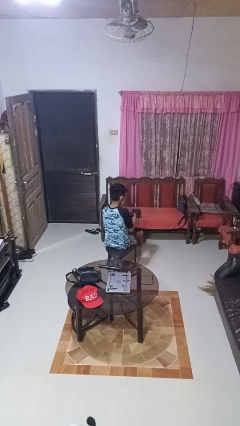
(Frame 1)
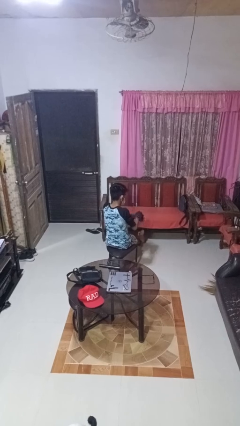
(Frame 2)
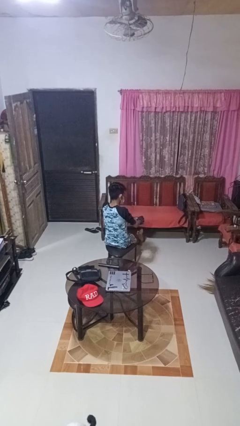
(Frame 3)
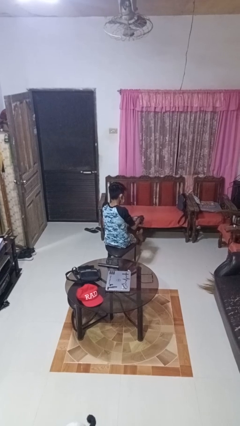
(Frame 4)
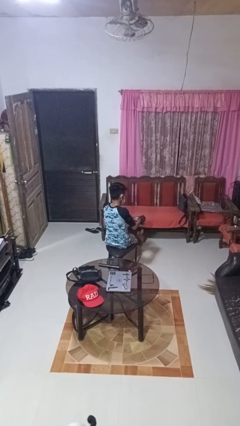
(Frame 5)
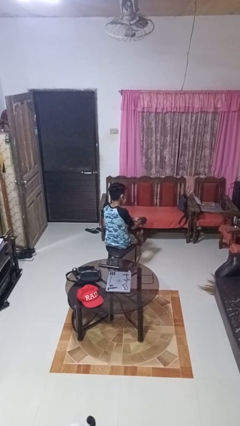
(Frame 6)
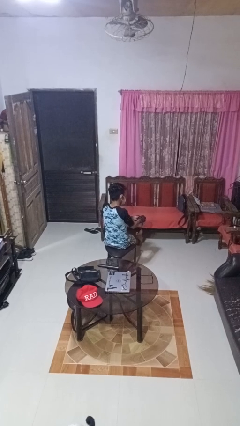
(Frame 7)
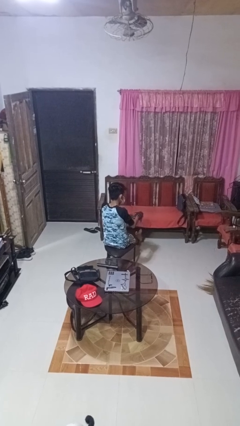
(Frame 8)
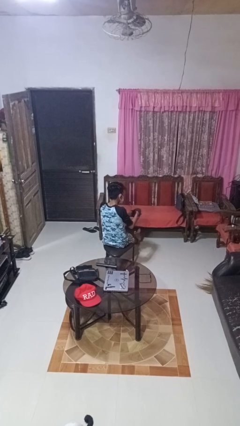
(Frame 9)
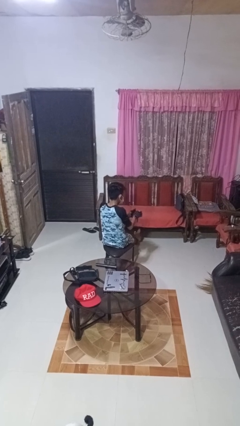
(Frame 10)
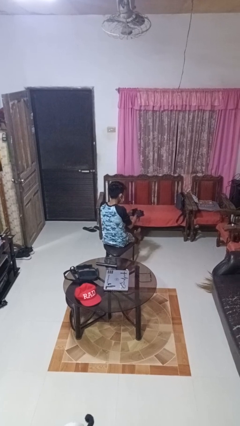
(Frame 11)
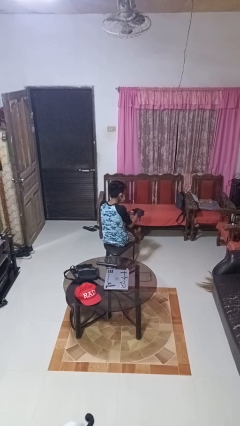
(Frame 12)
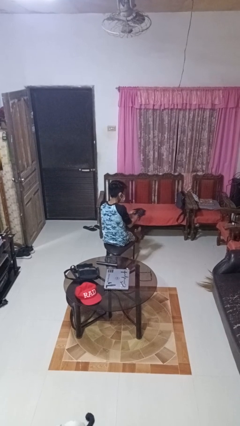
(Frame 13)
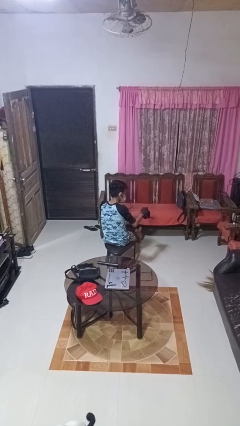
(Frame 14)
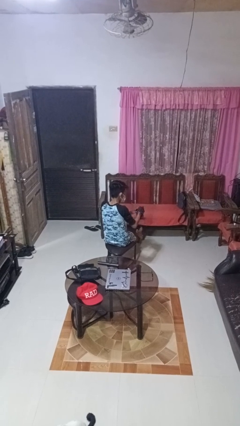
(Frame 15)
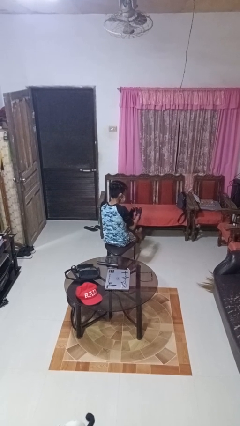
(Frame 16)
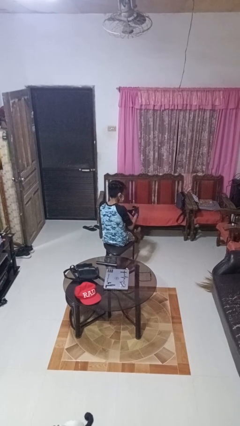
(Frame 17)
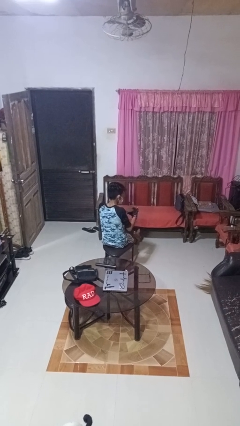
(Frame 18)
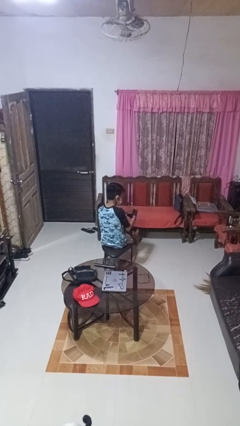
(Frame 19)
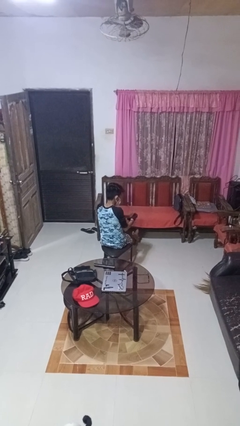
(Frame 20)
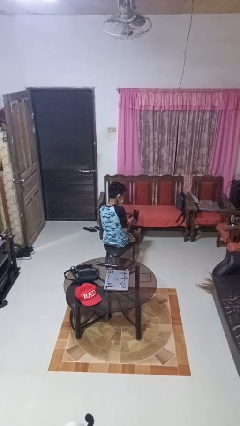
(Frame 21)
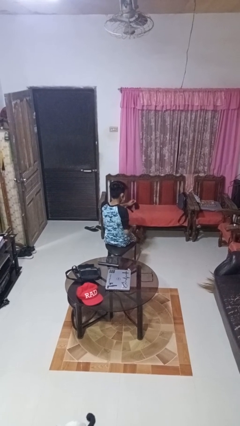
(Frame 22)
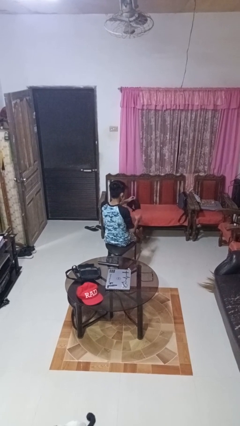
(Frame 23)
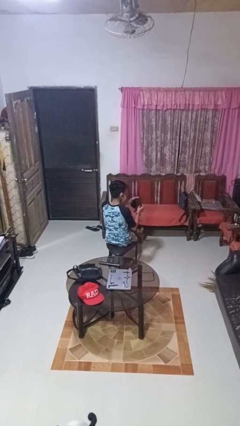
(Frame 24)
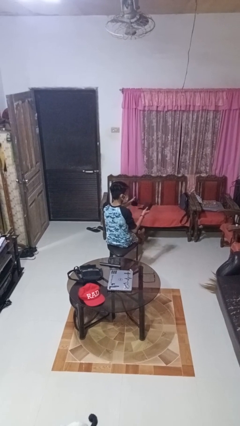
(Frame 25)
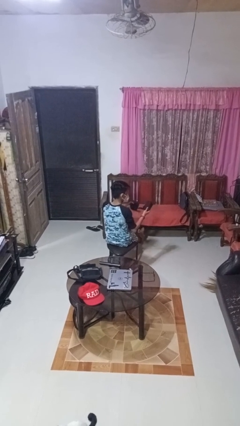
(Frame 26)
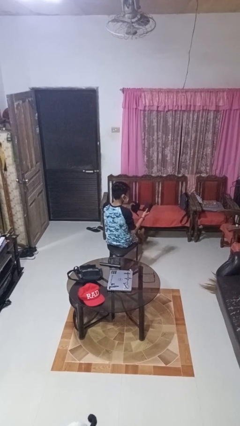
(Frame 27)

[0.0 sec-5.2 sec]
person takes off gloves

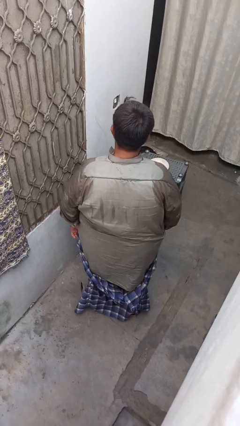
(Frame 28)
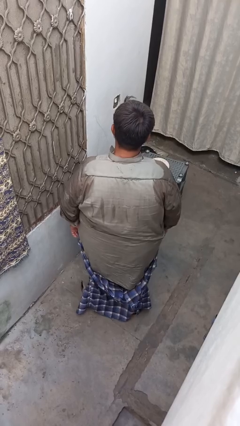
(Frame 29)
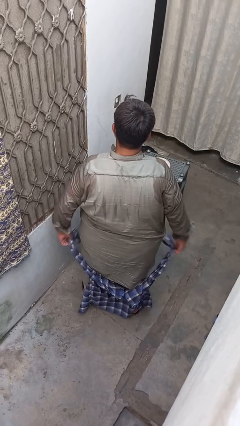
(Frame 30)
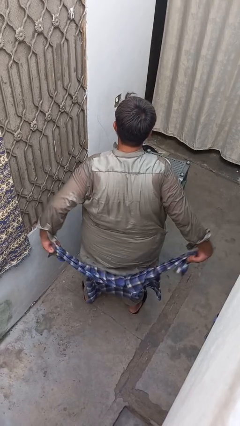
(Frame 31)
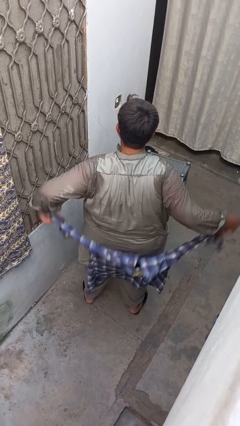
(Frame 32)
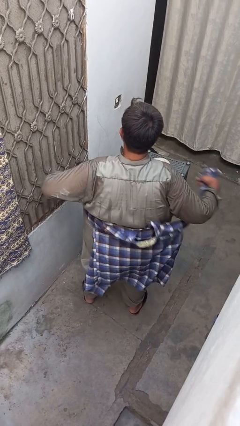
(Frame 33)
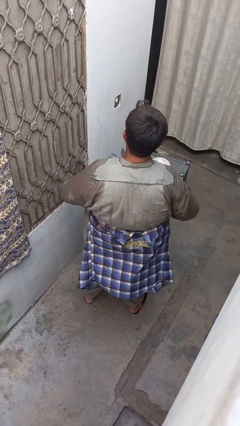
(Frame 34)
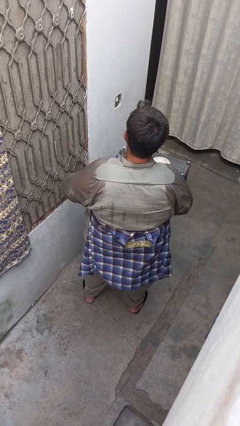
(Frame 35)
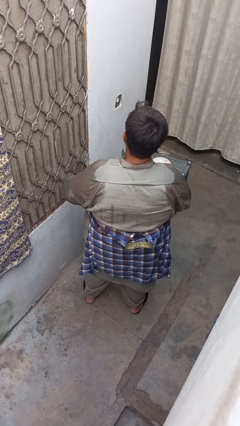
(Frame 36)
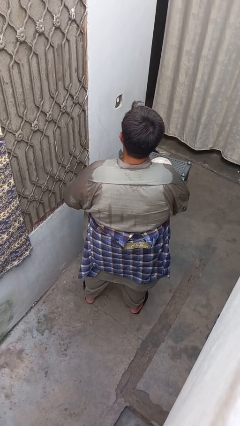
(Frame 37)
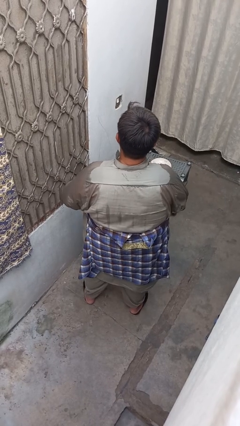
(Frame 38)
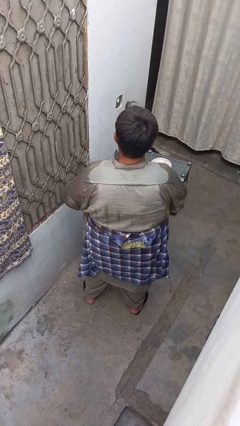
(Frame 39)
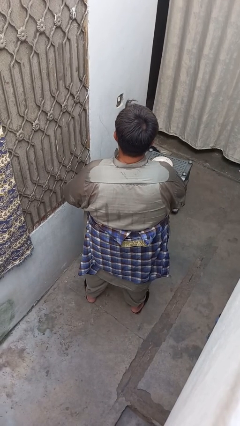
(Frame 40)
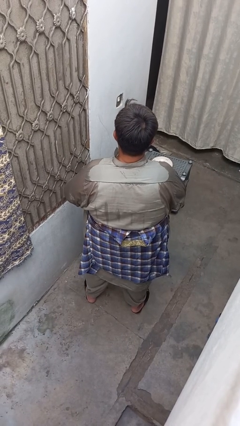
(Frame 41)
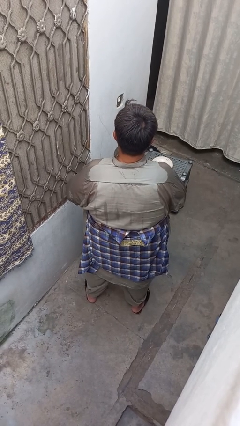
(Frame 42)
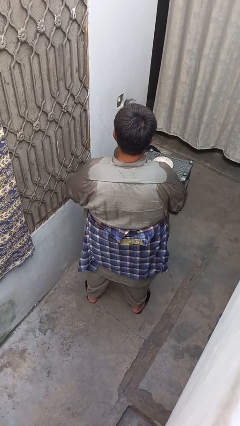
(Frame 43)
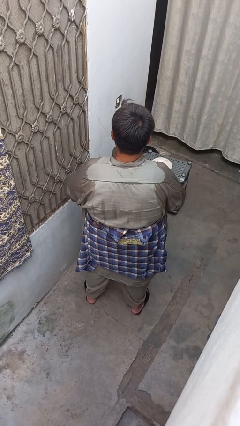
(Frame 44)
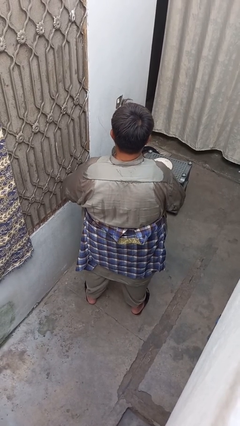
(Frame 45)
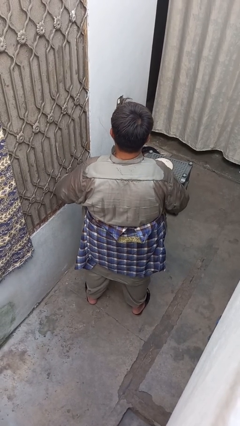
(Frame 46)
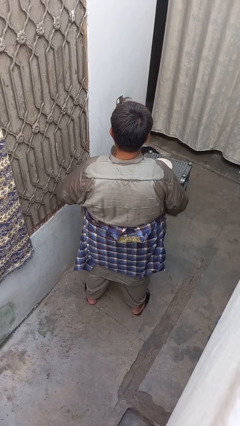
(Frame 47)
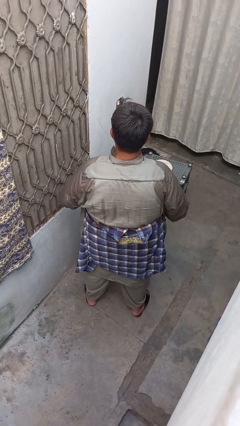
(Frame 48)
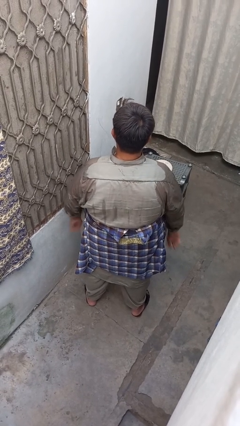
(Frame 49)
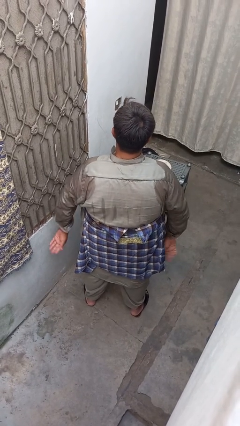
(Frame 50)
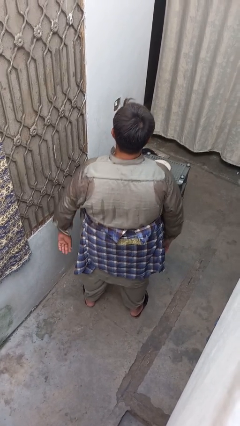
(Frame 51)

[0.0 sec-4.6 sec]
person ties jacket around waist

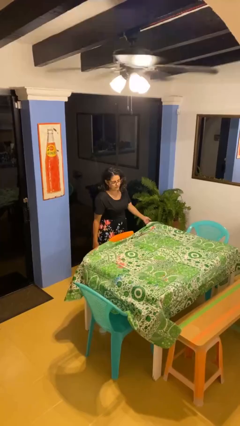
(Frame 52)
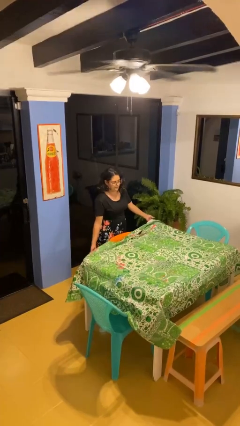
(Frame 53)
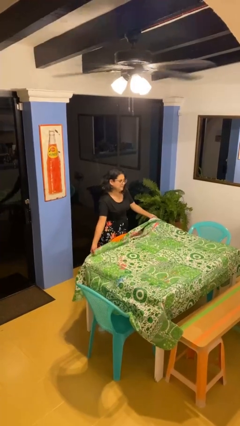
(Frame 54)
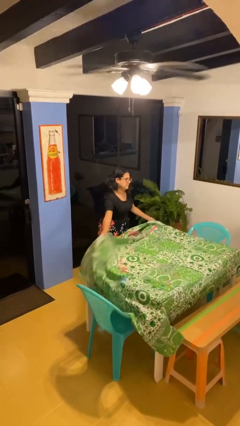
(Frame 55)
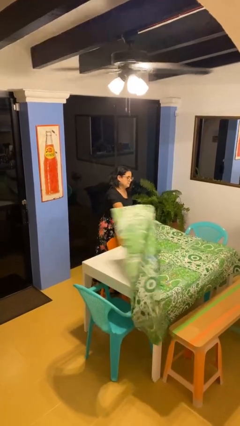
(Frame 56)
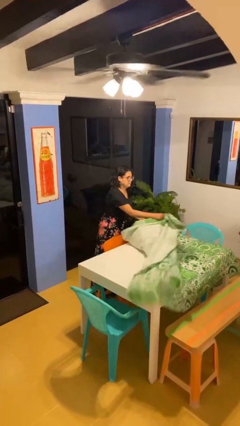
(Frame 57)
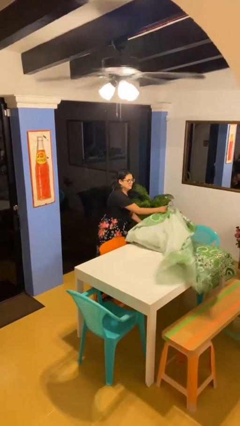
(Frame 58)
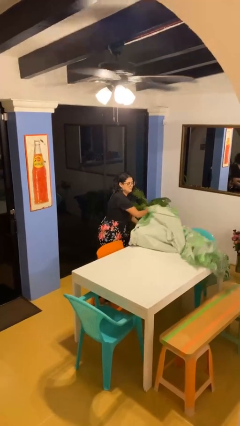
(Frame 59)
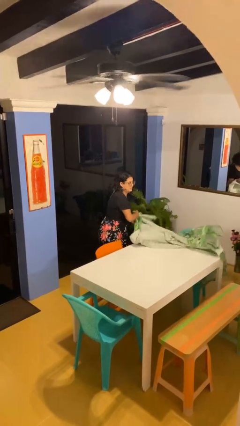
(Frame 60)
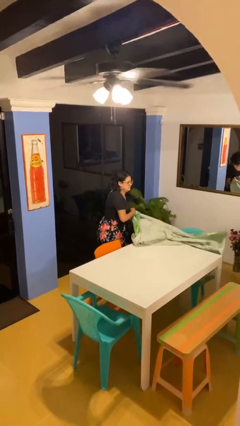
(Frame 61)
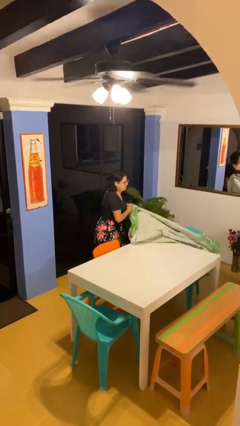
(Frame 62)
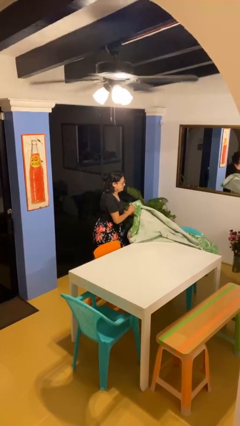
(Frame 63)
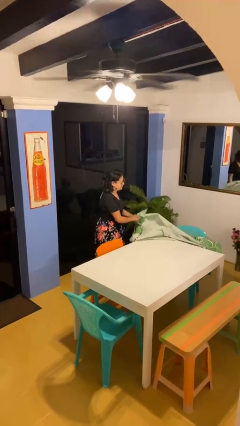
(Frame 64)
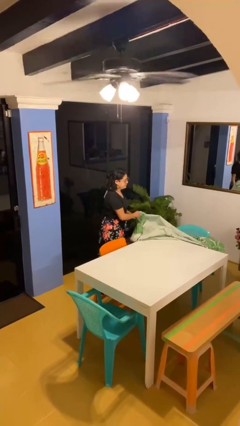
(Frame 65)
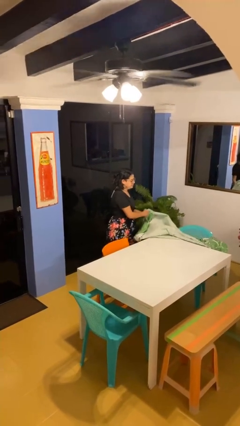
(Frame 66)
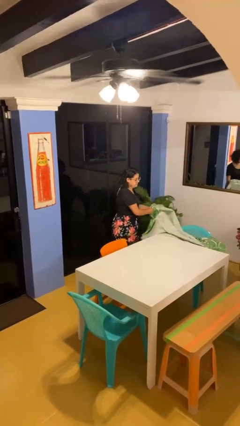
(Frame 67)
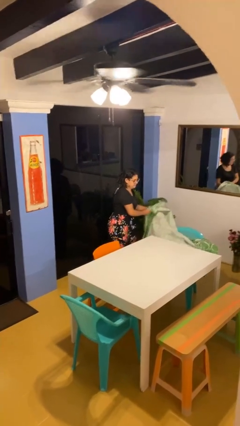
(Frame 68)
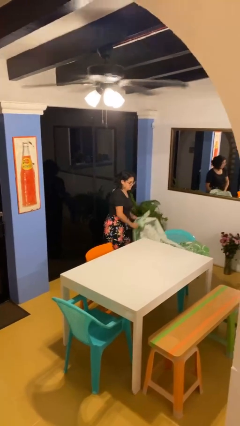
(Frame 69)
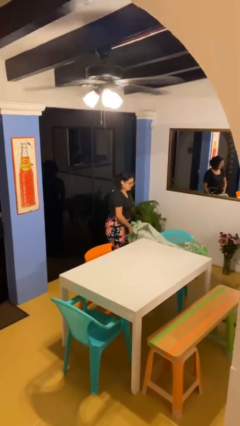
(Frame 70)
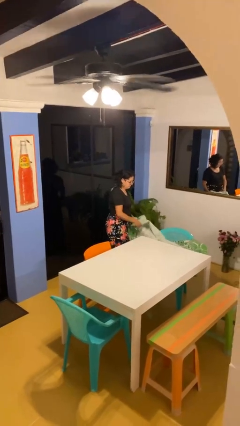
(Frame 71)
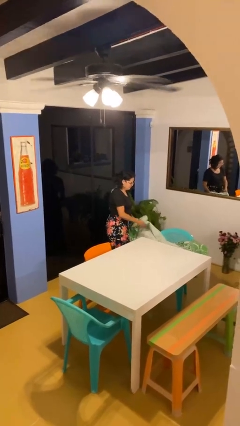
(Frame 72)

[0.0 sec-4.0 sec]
person folds tablecloth

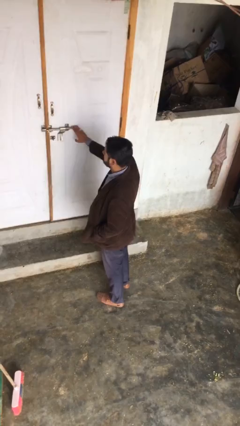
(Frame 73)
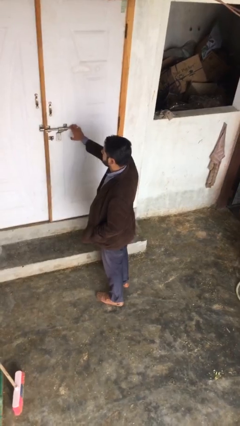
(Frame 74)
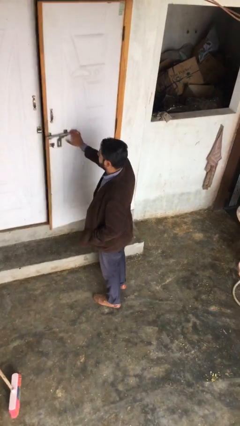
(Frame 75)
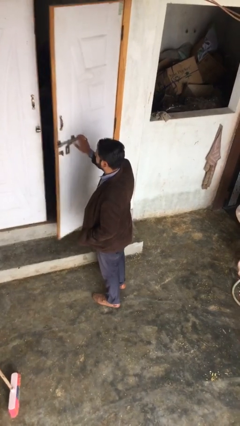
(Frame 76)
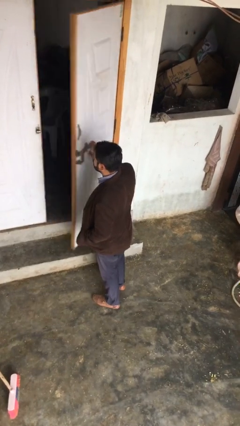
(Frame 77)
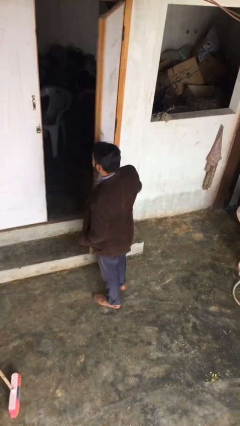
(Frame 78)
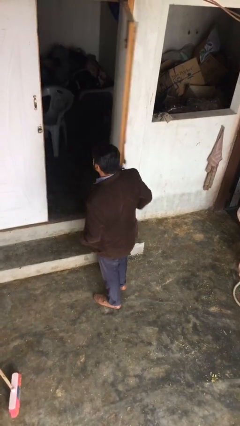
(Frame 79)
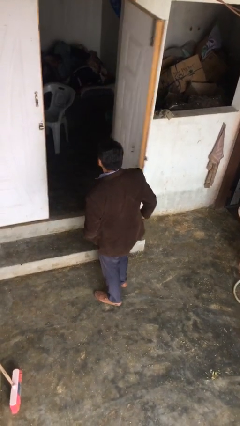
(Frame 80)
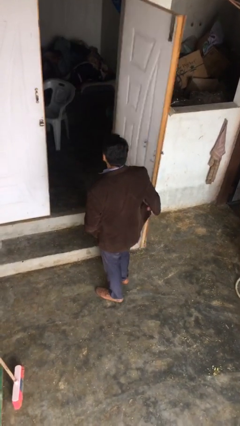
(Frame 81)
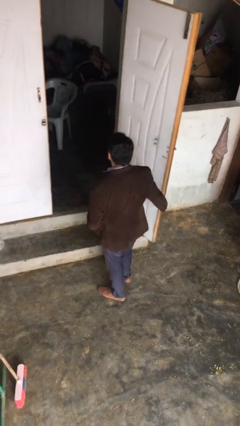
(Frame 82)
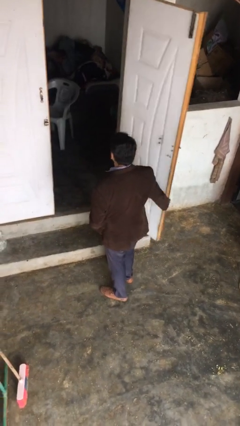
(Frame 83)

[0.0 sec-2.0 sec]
person opens facility door

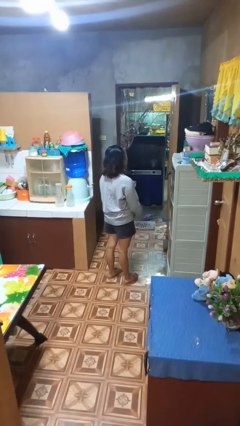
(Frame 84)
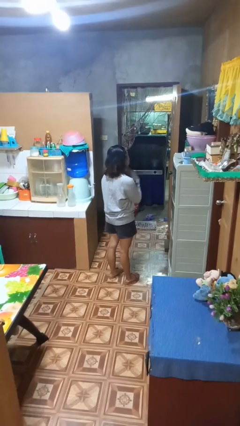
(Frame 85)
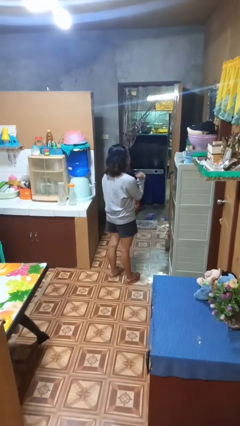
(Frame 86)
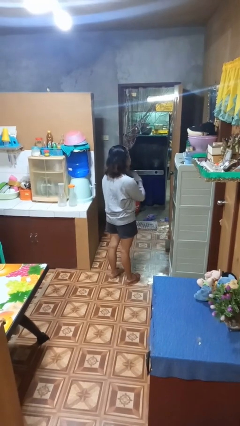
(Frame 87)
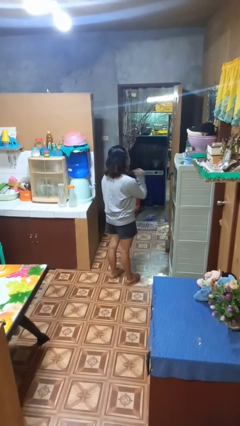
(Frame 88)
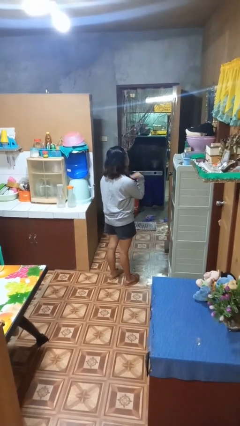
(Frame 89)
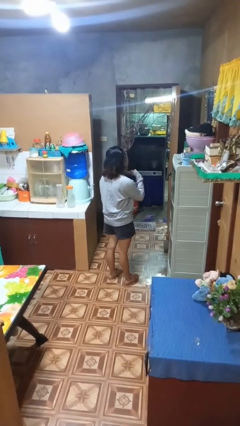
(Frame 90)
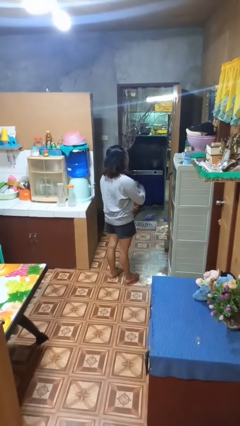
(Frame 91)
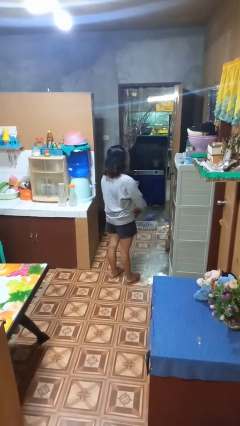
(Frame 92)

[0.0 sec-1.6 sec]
person gestures cut
